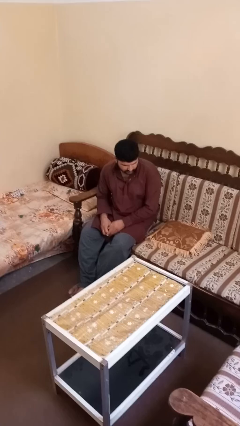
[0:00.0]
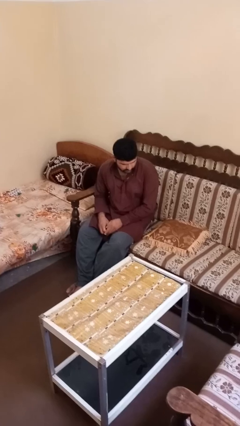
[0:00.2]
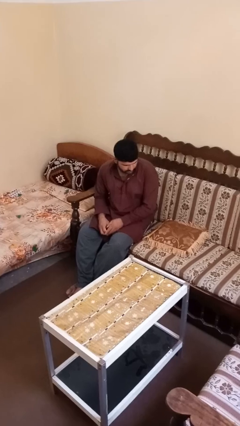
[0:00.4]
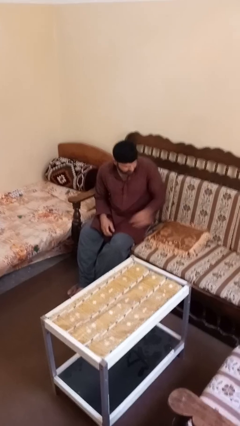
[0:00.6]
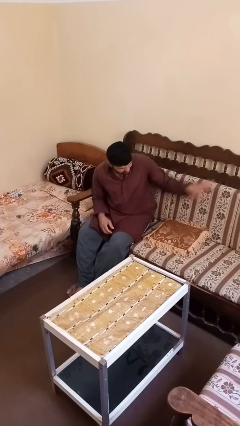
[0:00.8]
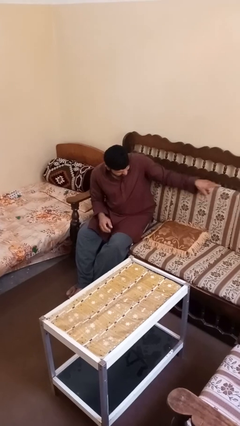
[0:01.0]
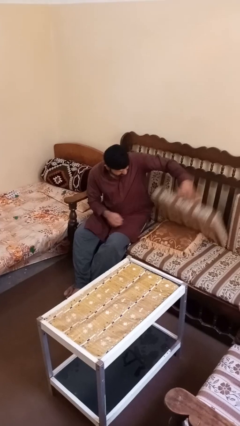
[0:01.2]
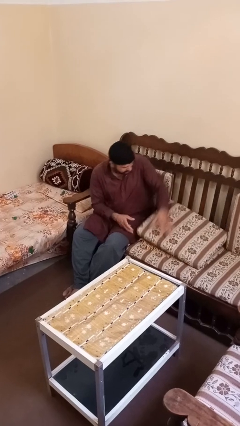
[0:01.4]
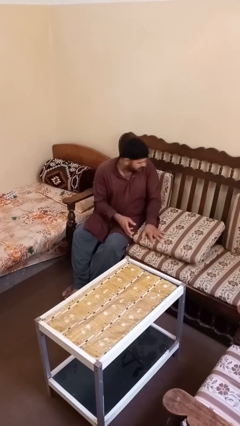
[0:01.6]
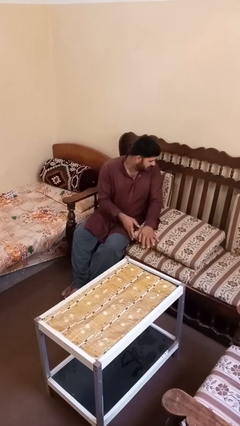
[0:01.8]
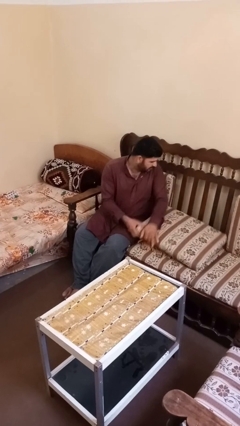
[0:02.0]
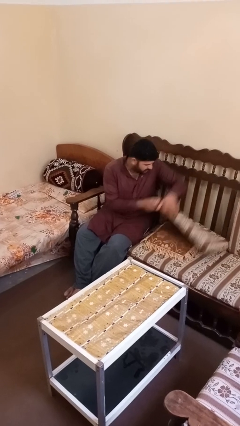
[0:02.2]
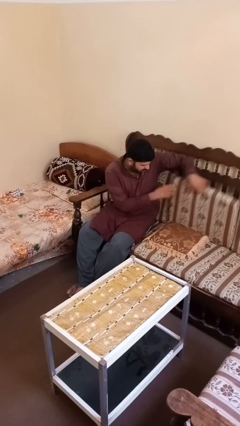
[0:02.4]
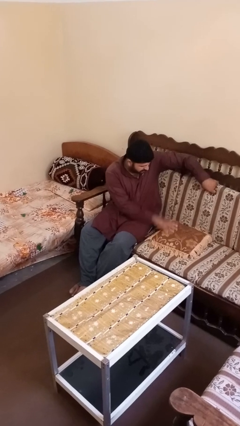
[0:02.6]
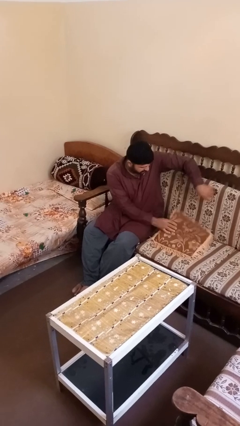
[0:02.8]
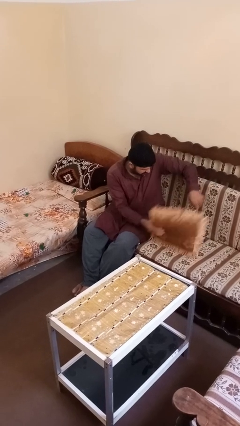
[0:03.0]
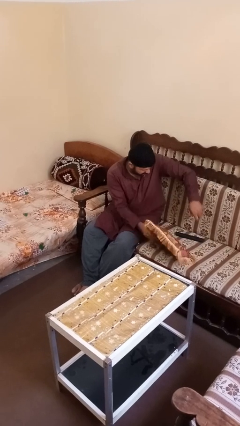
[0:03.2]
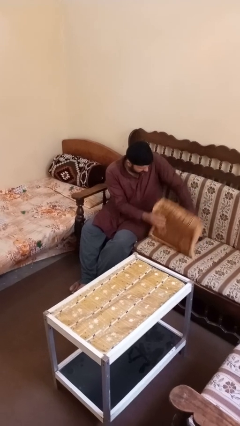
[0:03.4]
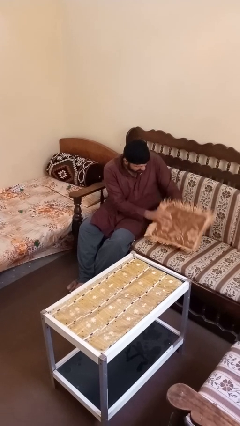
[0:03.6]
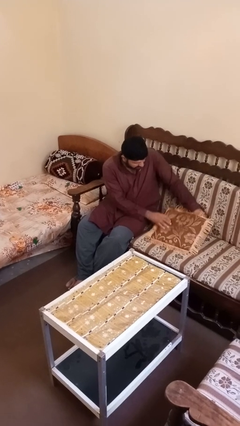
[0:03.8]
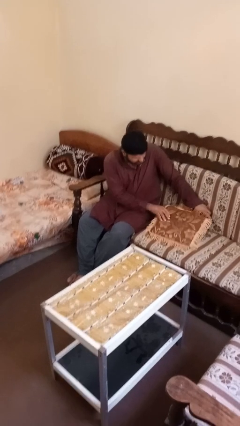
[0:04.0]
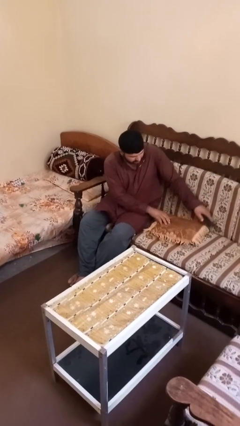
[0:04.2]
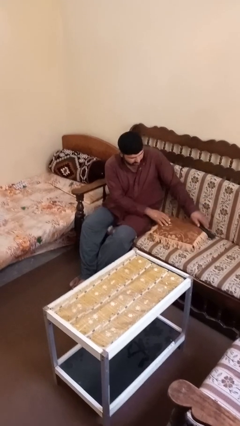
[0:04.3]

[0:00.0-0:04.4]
person searches in couch

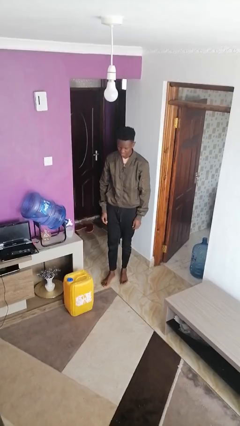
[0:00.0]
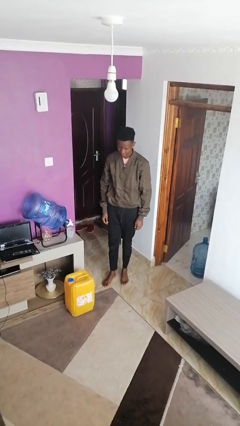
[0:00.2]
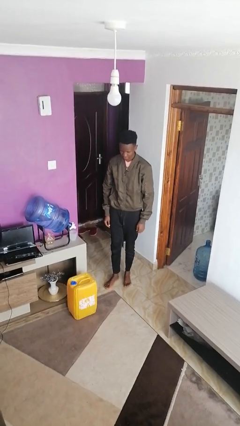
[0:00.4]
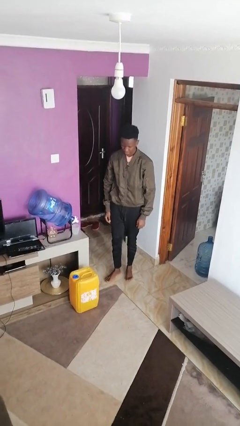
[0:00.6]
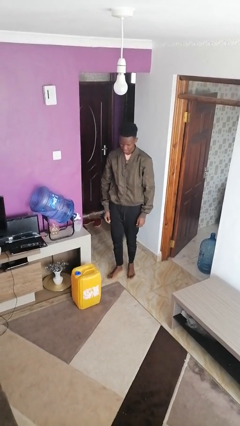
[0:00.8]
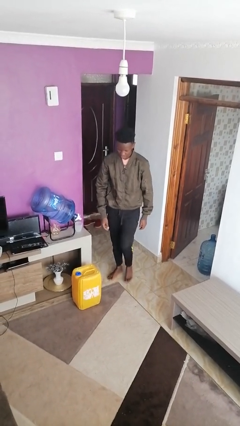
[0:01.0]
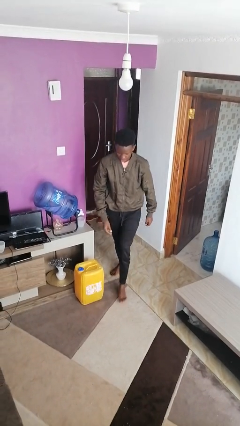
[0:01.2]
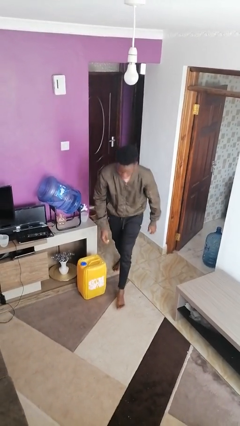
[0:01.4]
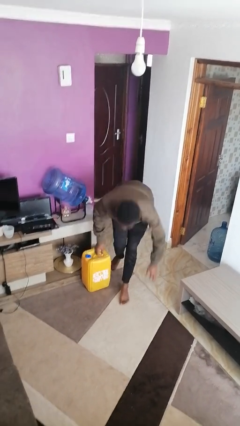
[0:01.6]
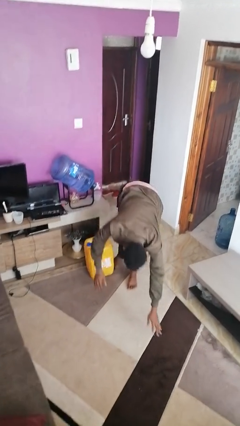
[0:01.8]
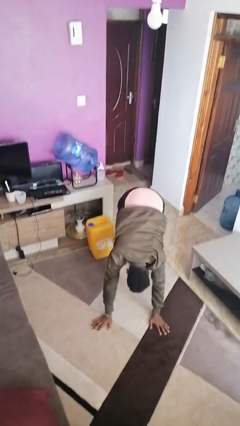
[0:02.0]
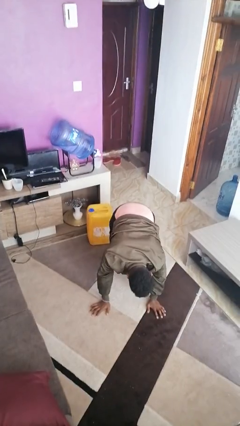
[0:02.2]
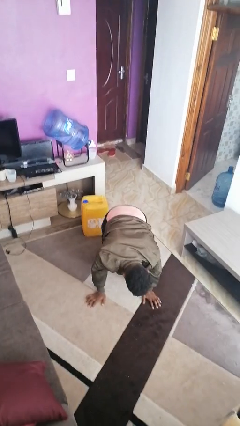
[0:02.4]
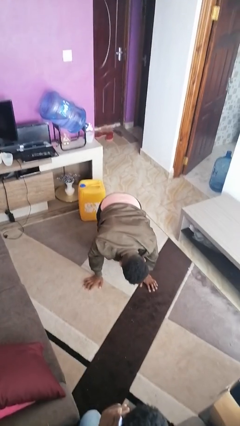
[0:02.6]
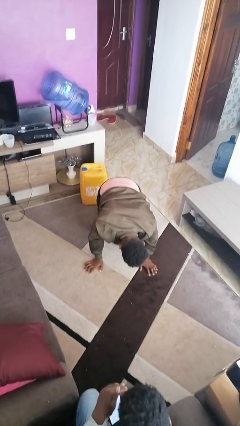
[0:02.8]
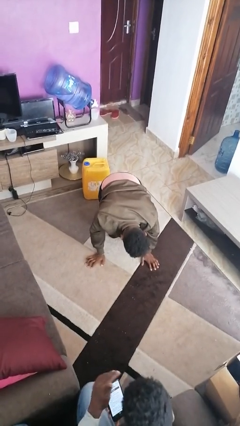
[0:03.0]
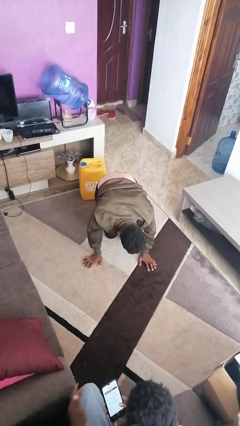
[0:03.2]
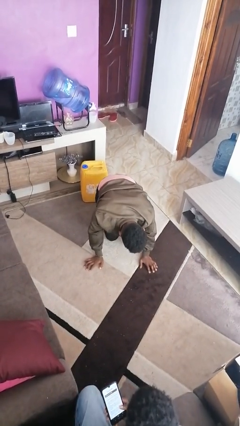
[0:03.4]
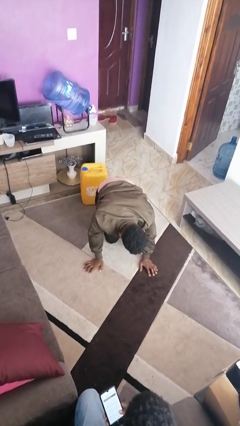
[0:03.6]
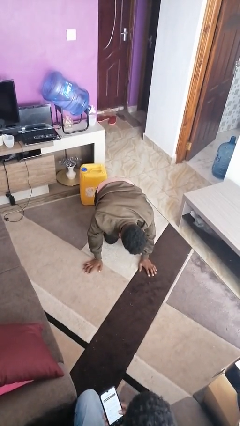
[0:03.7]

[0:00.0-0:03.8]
person trips on object on floor

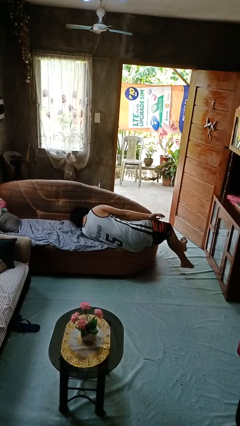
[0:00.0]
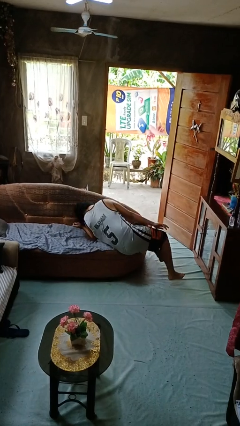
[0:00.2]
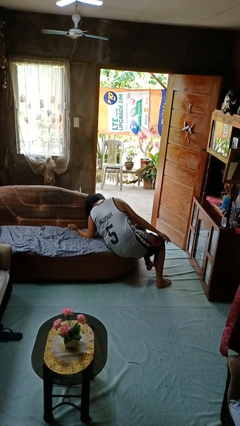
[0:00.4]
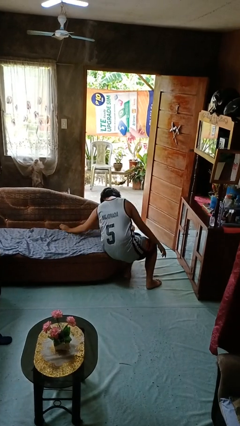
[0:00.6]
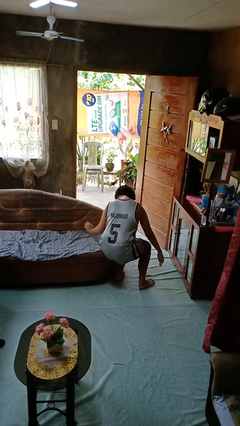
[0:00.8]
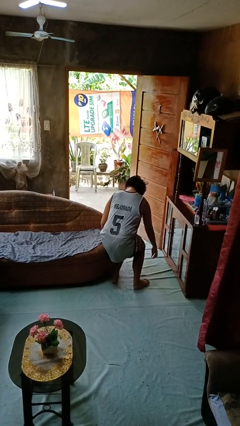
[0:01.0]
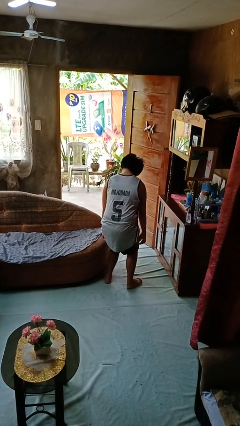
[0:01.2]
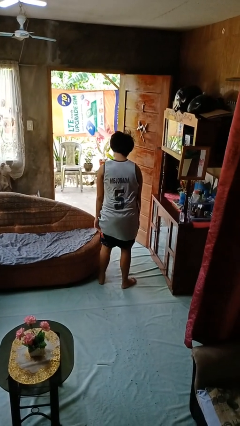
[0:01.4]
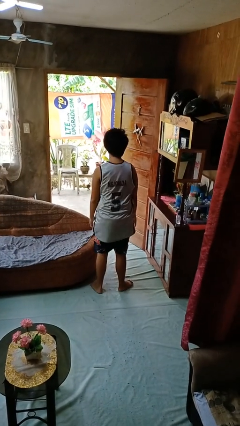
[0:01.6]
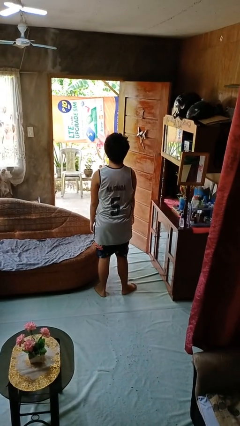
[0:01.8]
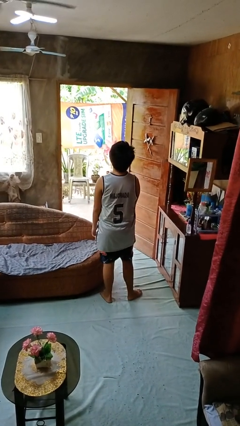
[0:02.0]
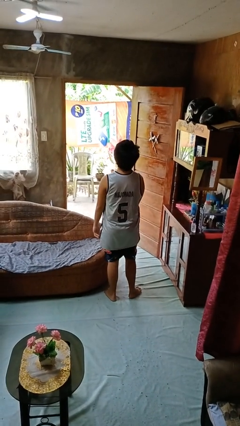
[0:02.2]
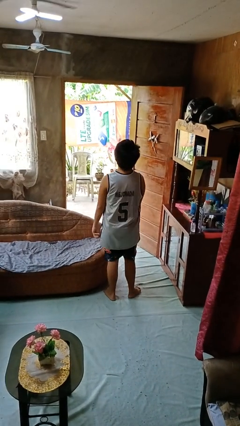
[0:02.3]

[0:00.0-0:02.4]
person stands up

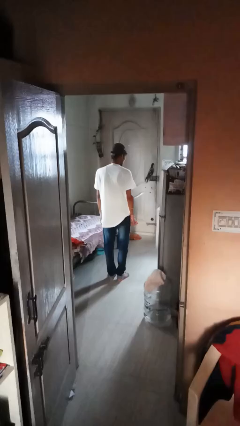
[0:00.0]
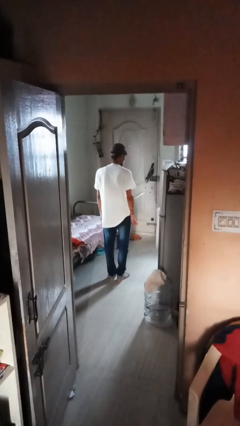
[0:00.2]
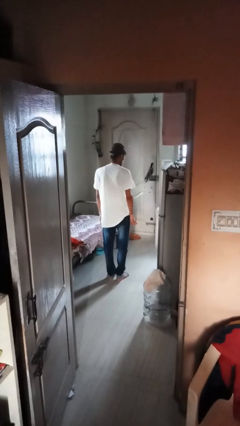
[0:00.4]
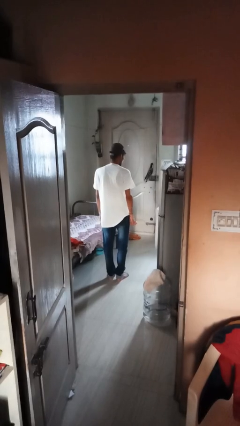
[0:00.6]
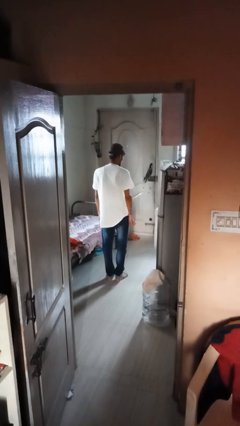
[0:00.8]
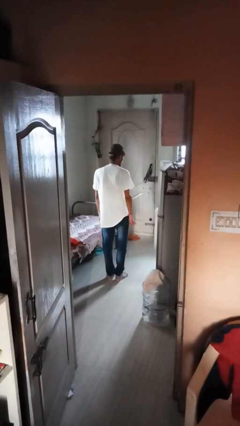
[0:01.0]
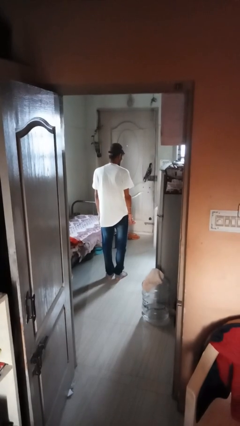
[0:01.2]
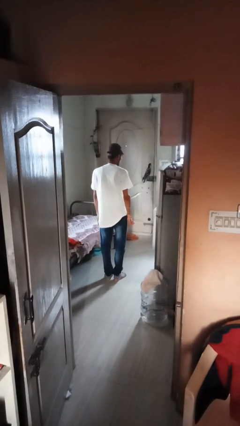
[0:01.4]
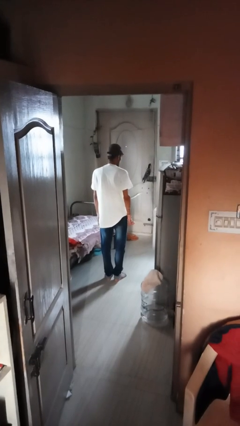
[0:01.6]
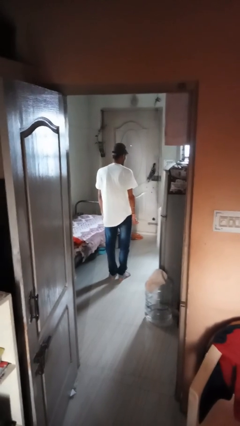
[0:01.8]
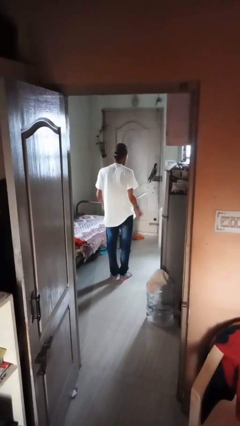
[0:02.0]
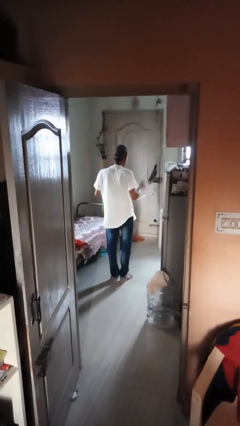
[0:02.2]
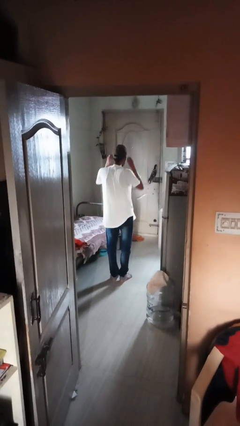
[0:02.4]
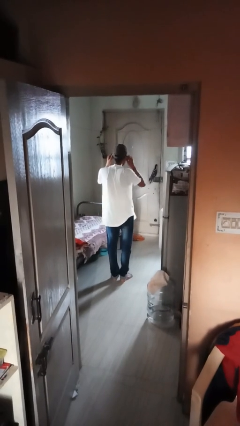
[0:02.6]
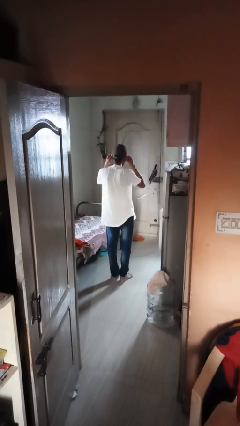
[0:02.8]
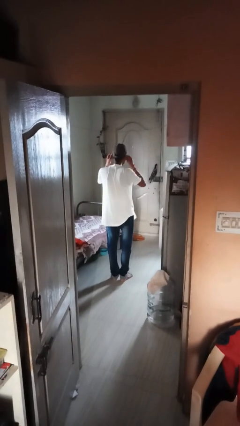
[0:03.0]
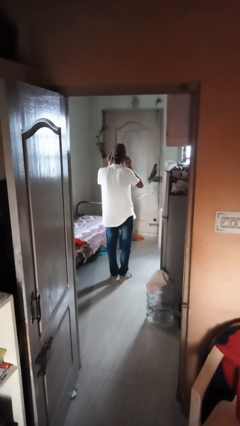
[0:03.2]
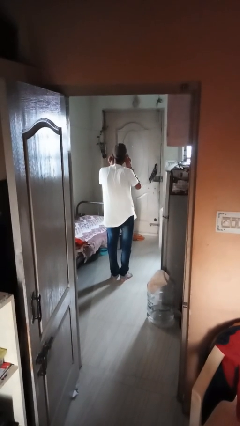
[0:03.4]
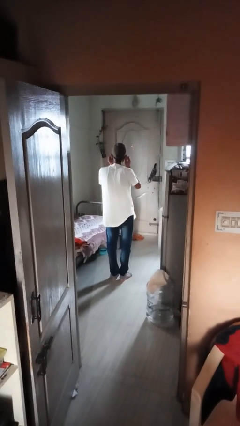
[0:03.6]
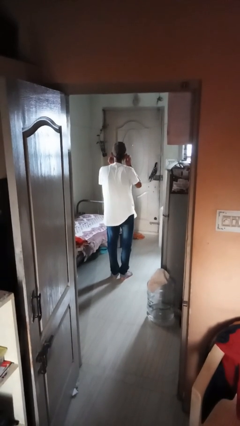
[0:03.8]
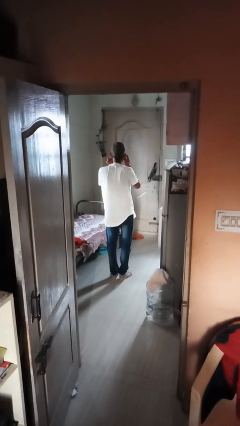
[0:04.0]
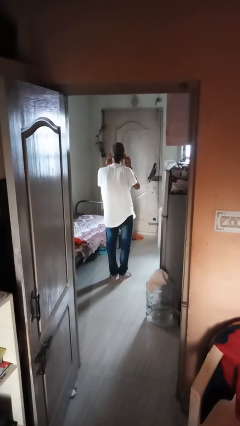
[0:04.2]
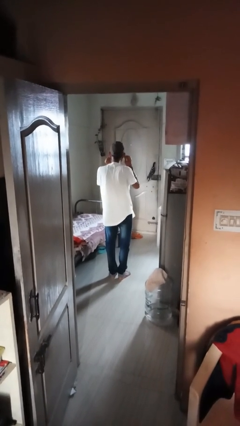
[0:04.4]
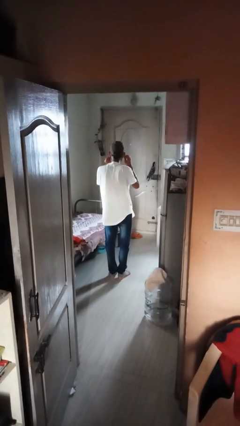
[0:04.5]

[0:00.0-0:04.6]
person touches earlobe

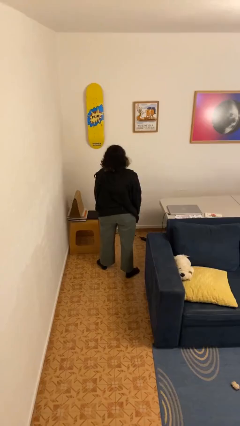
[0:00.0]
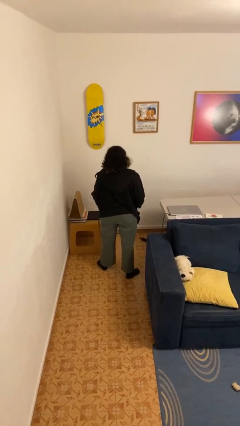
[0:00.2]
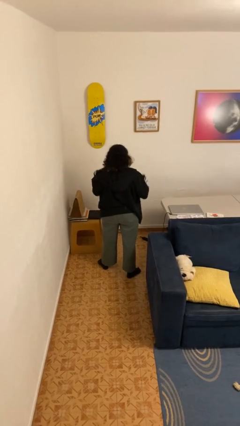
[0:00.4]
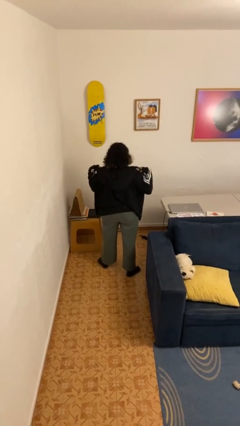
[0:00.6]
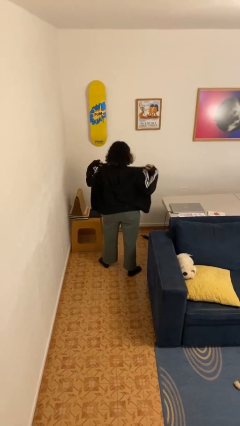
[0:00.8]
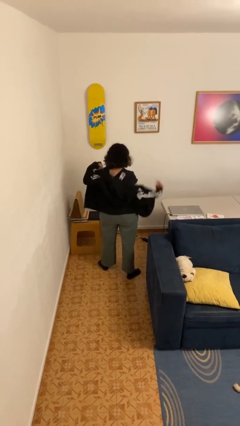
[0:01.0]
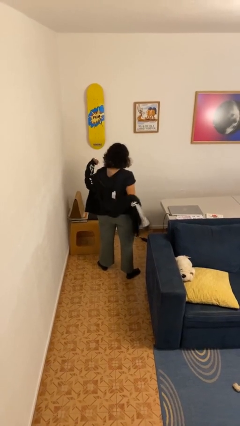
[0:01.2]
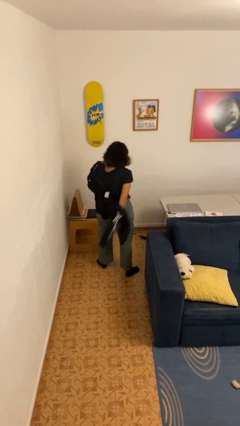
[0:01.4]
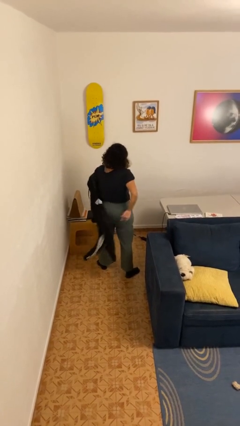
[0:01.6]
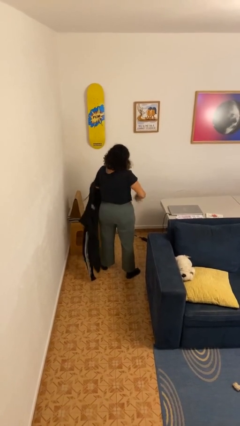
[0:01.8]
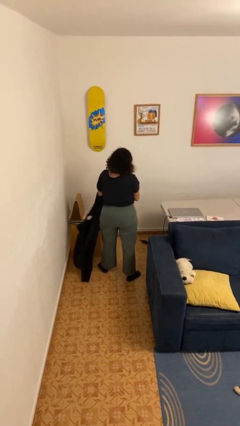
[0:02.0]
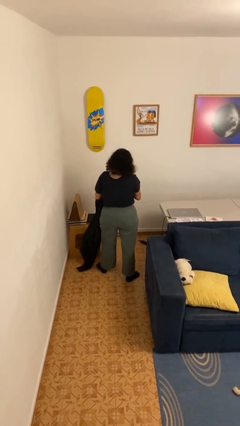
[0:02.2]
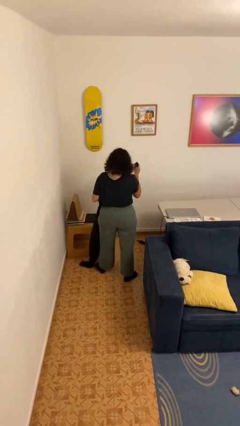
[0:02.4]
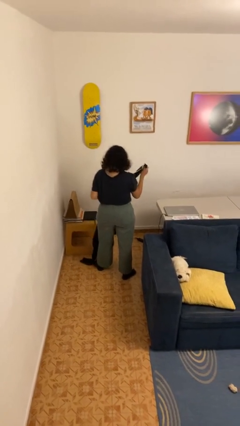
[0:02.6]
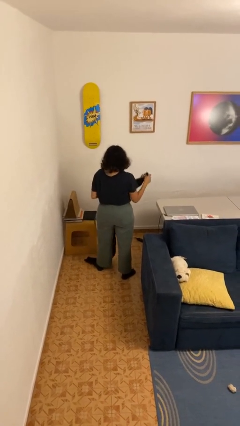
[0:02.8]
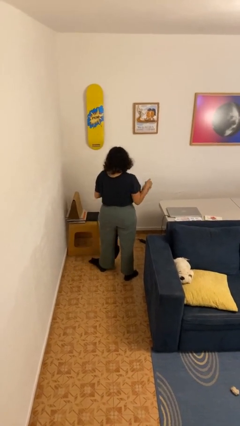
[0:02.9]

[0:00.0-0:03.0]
person takes off hoodie
